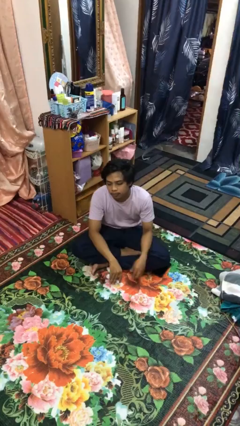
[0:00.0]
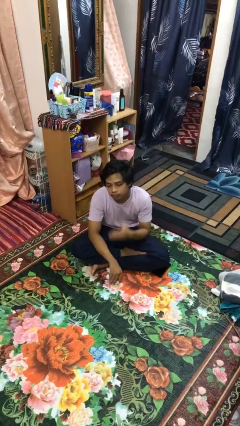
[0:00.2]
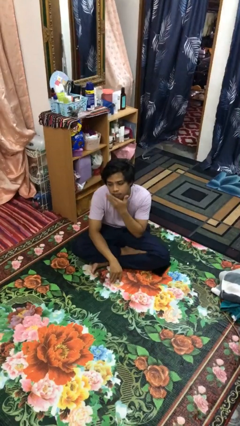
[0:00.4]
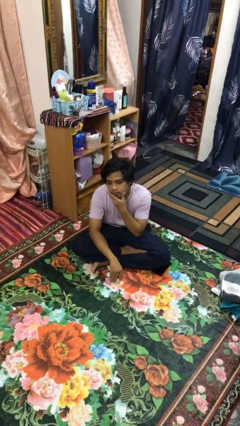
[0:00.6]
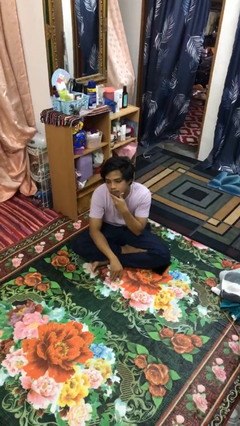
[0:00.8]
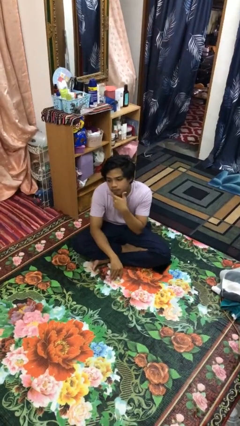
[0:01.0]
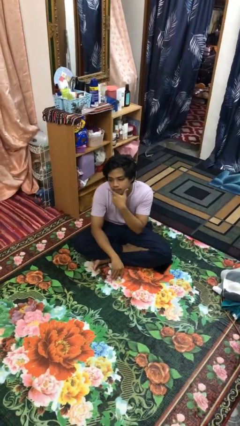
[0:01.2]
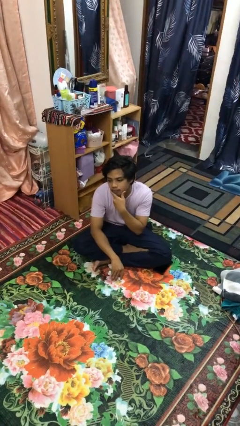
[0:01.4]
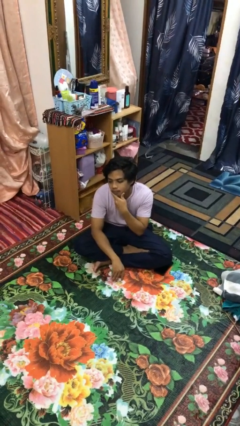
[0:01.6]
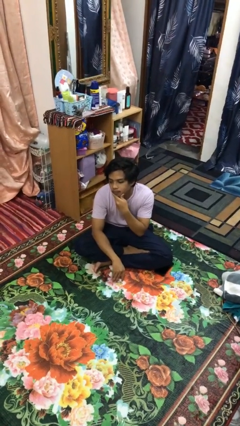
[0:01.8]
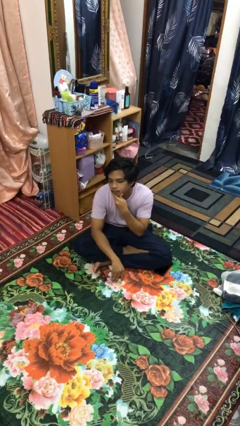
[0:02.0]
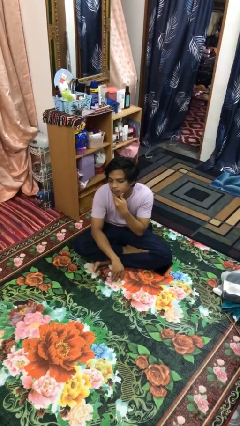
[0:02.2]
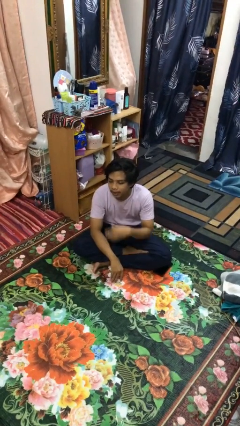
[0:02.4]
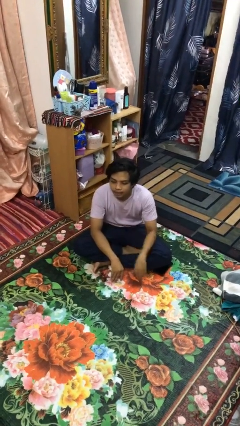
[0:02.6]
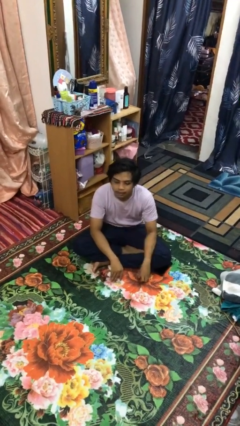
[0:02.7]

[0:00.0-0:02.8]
person strokes chin

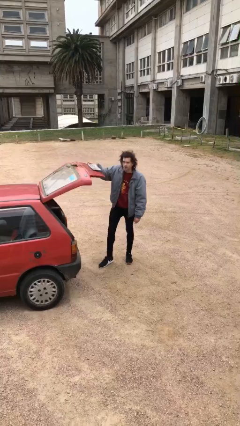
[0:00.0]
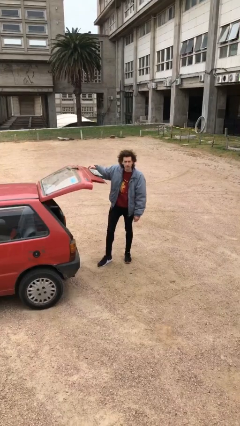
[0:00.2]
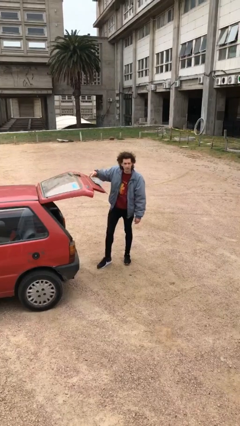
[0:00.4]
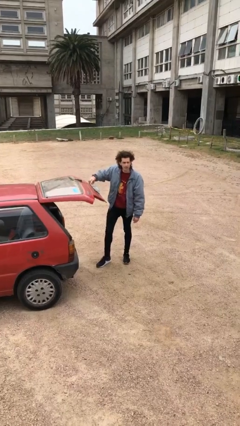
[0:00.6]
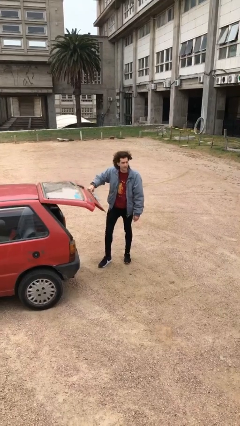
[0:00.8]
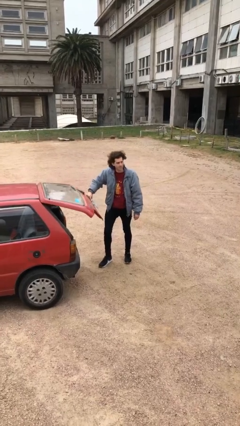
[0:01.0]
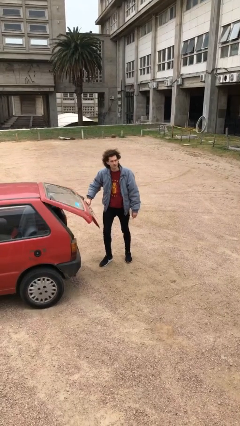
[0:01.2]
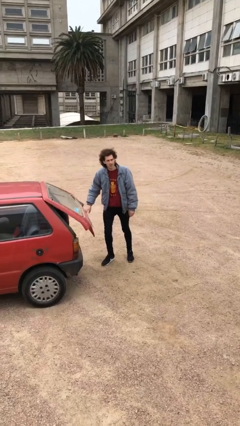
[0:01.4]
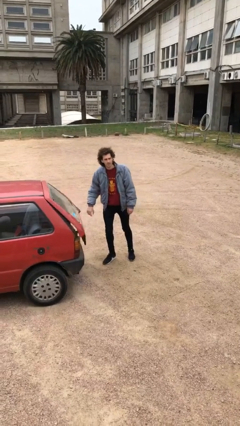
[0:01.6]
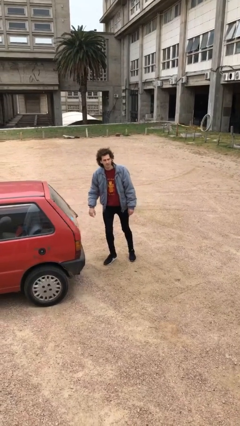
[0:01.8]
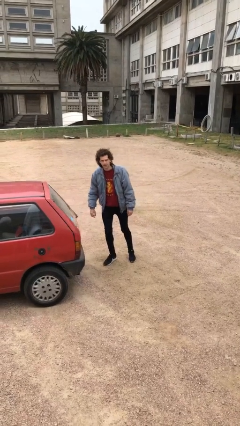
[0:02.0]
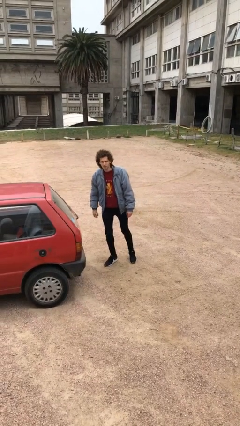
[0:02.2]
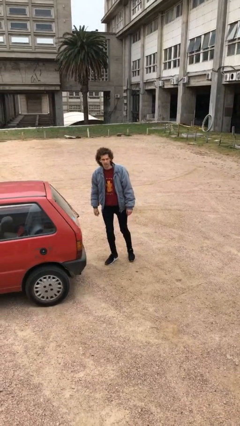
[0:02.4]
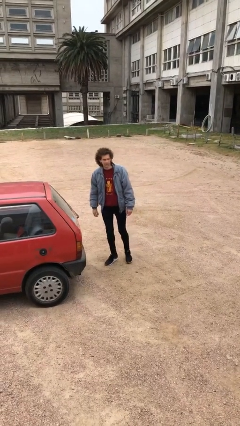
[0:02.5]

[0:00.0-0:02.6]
person closes car trunk

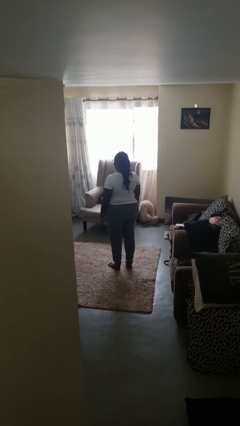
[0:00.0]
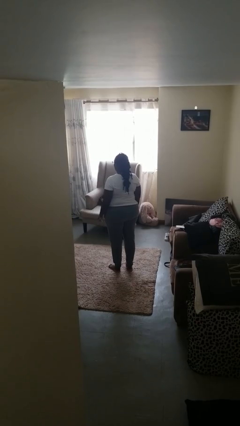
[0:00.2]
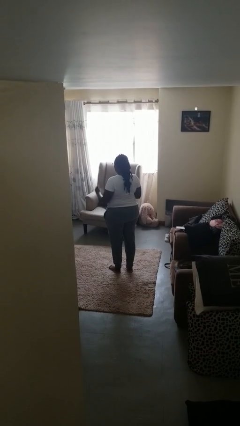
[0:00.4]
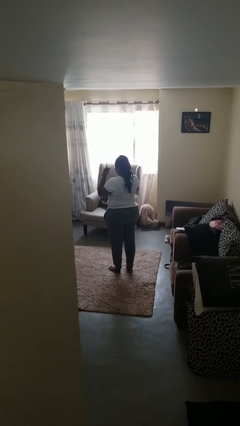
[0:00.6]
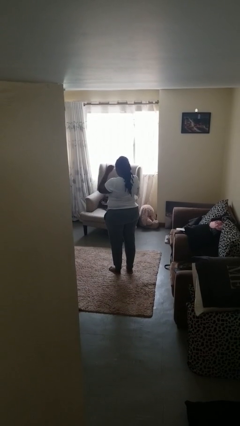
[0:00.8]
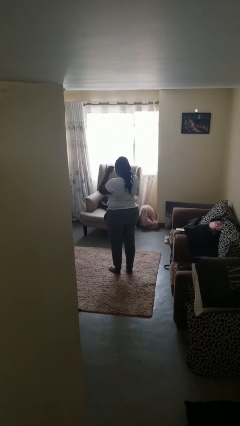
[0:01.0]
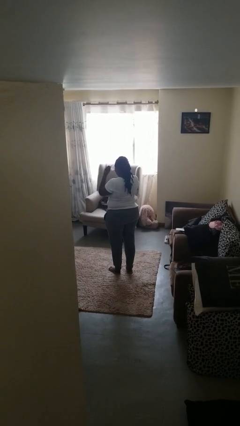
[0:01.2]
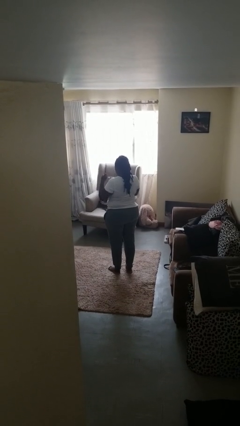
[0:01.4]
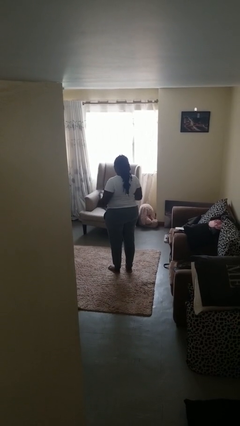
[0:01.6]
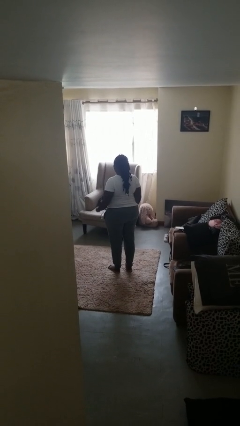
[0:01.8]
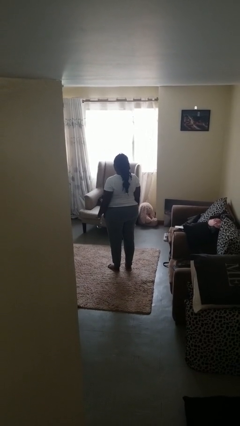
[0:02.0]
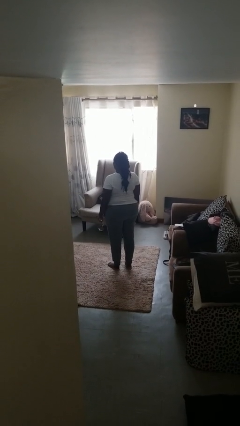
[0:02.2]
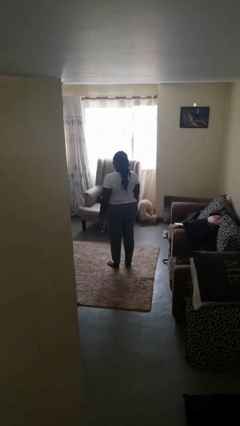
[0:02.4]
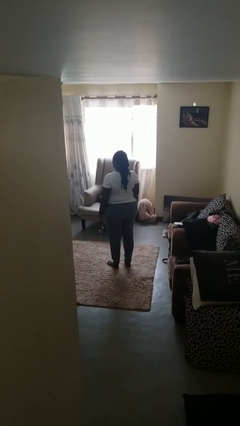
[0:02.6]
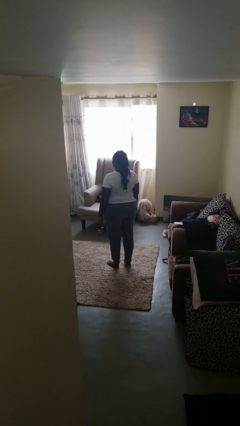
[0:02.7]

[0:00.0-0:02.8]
person takes off glasses

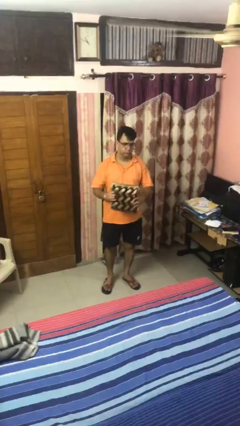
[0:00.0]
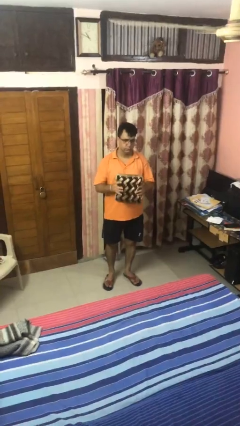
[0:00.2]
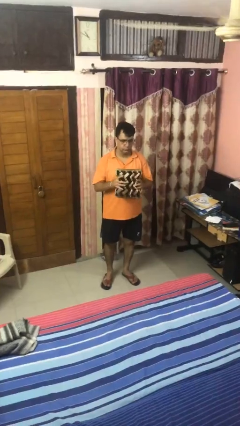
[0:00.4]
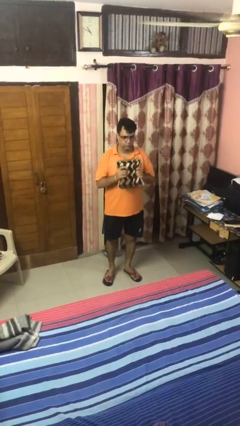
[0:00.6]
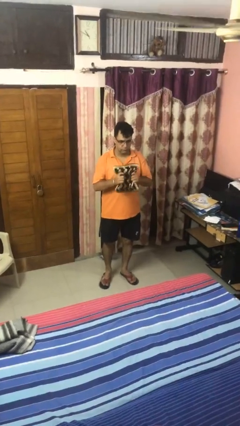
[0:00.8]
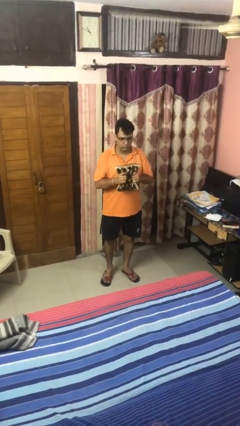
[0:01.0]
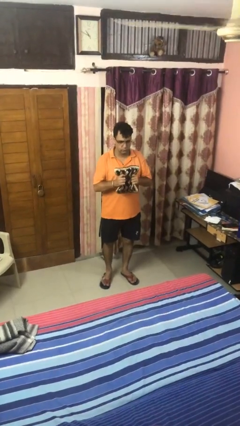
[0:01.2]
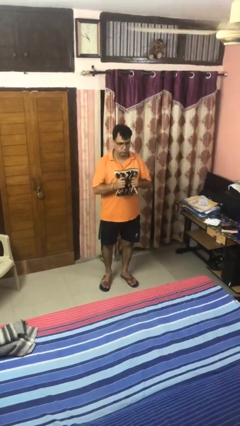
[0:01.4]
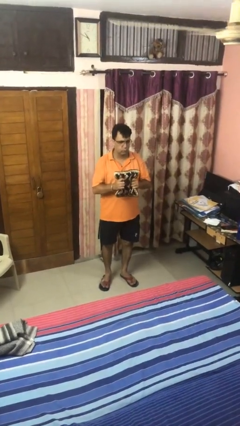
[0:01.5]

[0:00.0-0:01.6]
person squeezes object
